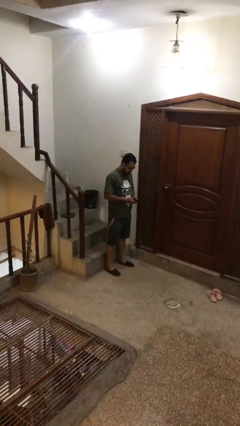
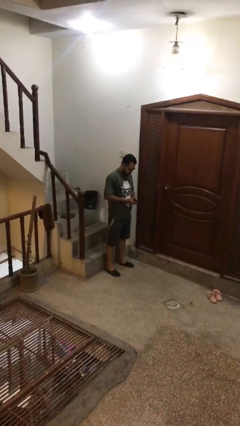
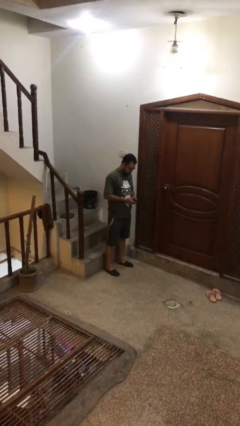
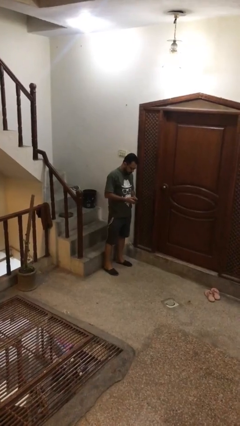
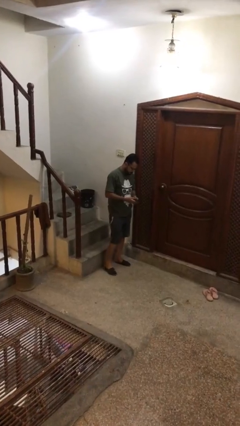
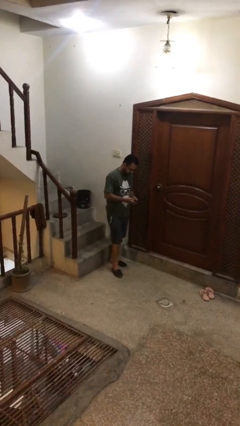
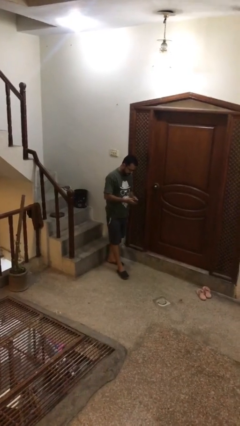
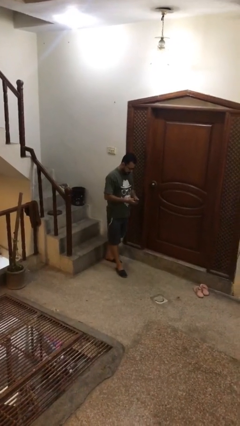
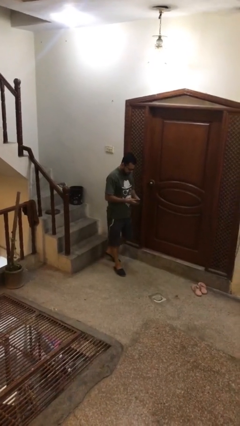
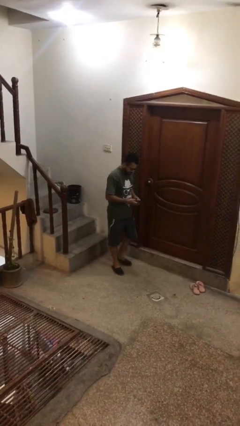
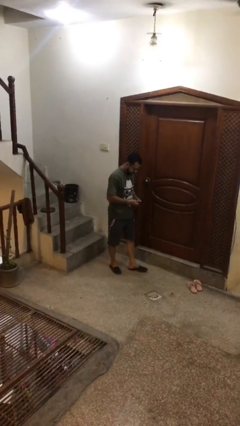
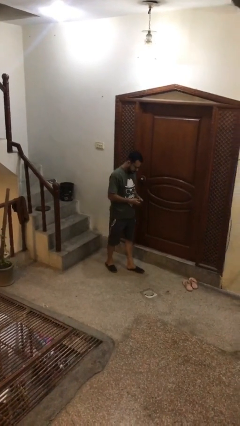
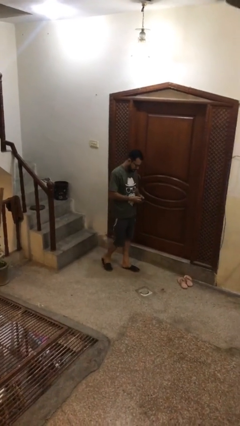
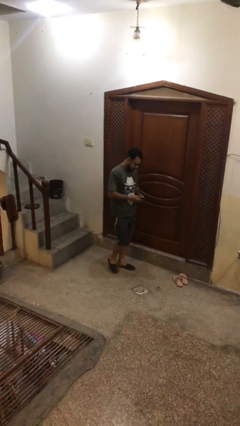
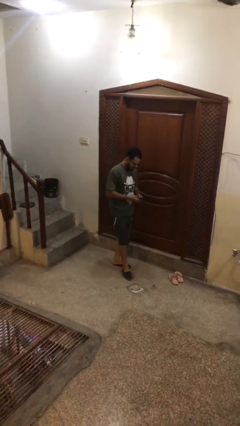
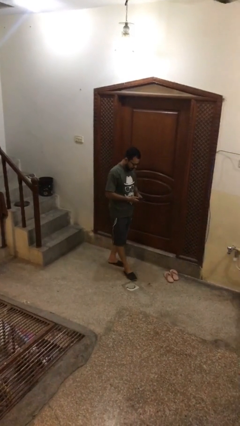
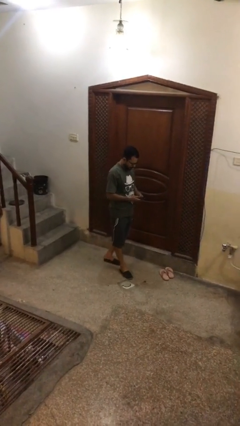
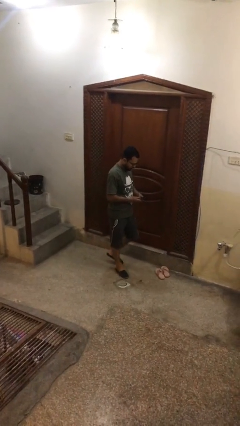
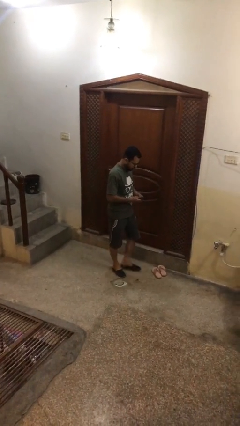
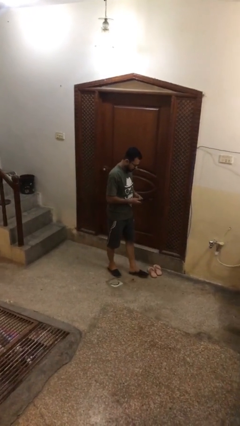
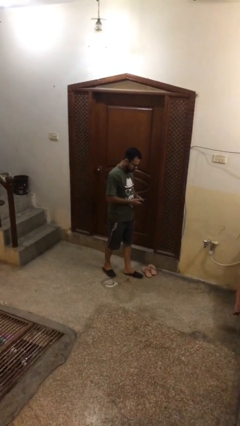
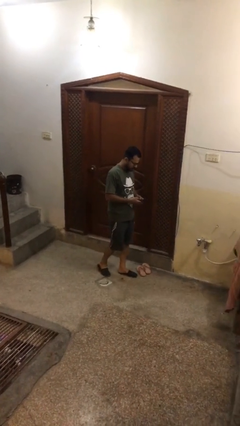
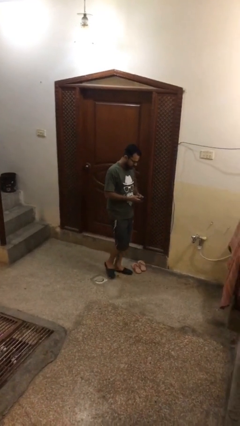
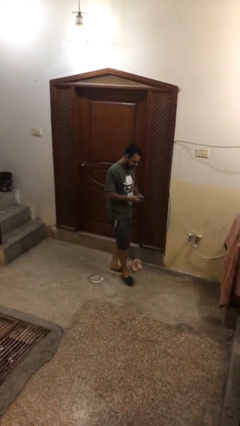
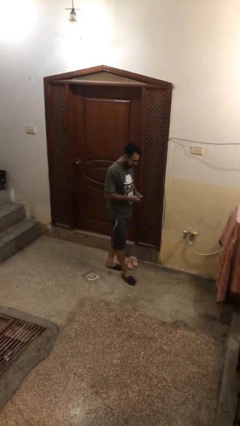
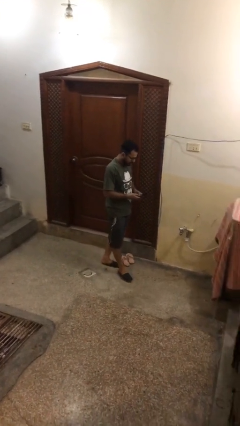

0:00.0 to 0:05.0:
person texts on phone

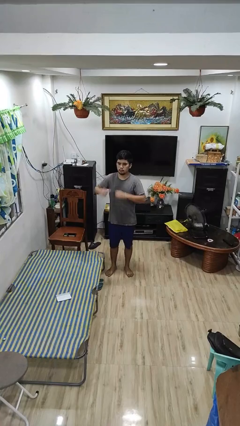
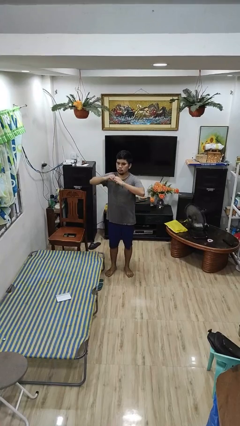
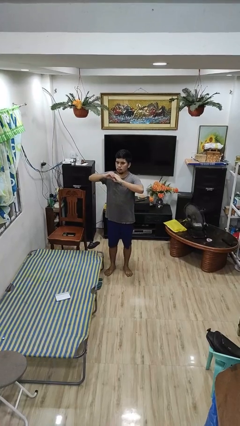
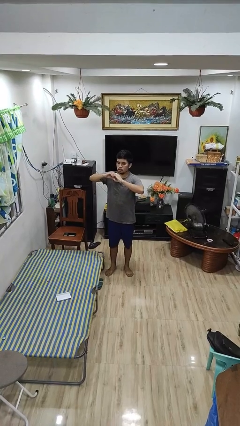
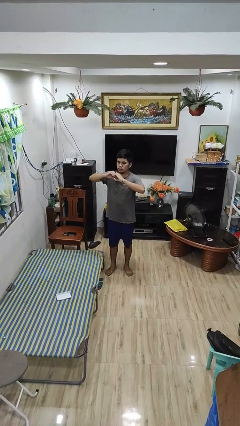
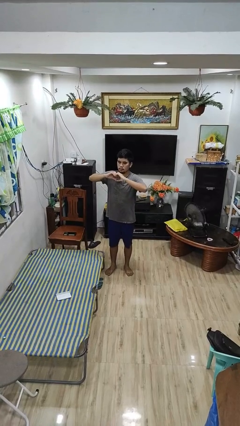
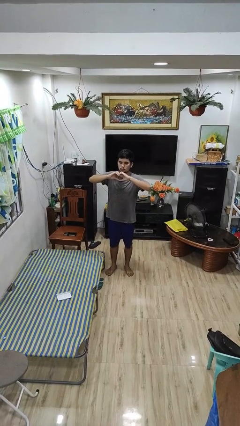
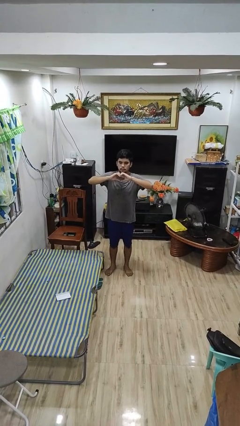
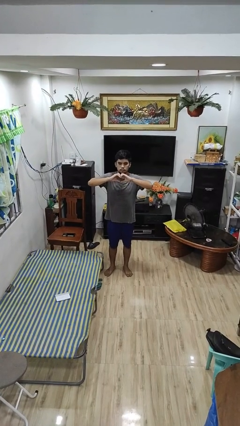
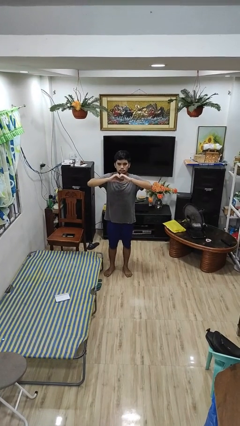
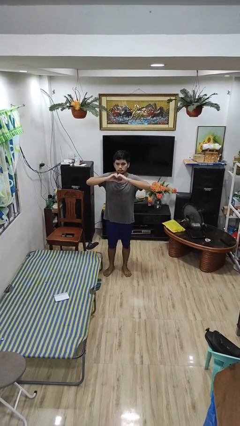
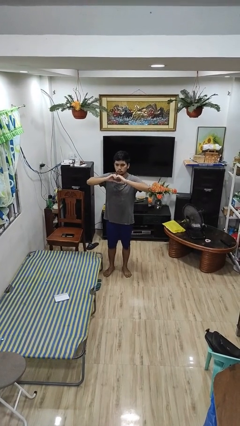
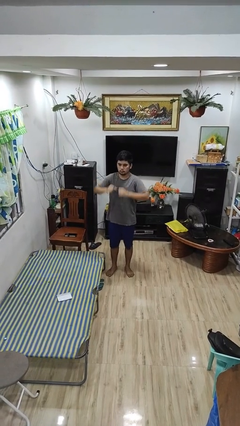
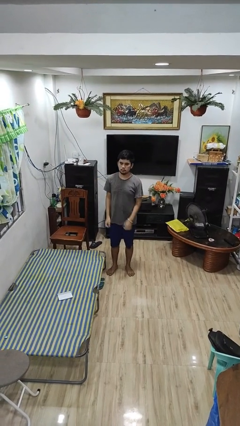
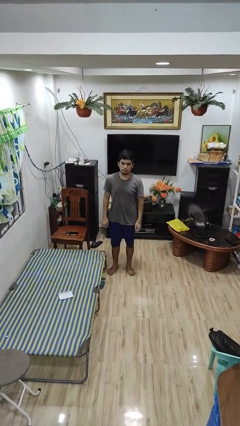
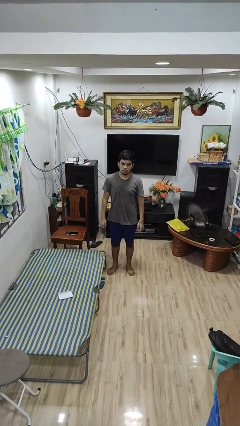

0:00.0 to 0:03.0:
person gestures heart

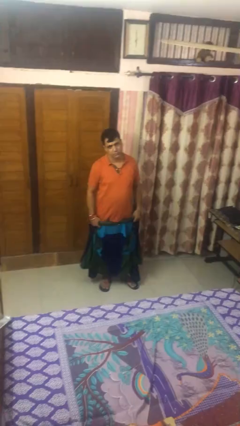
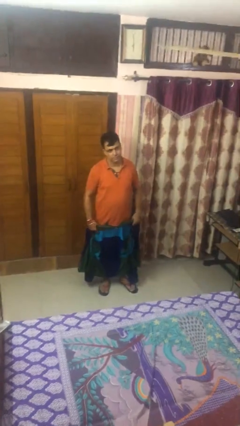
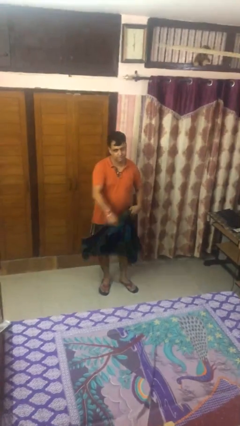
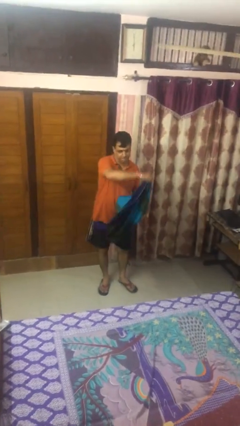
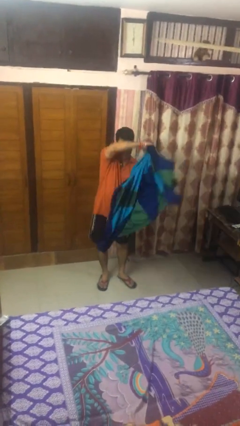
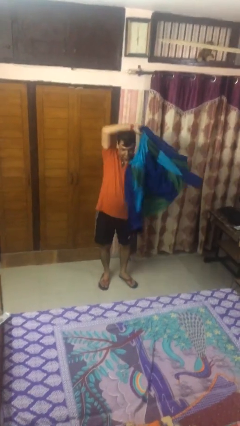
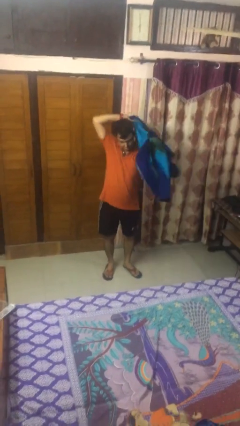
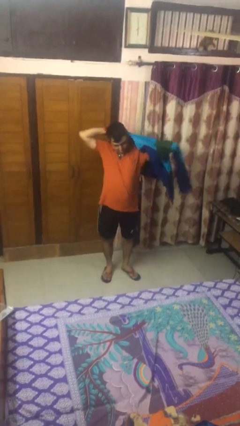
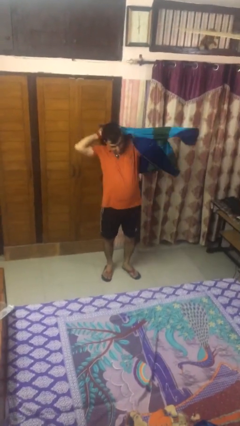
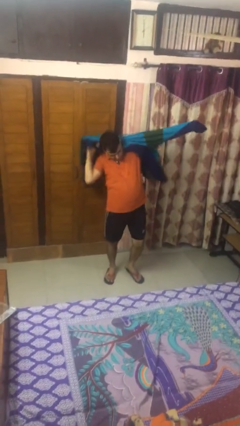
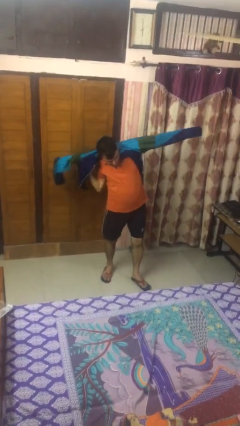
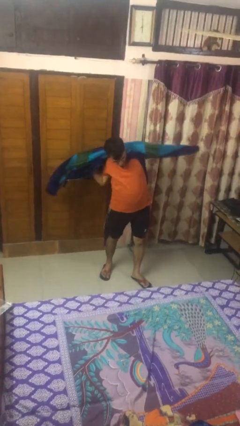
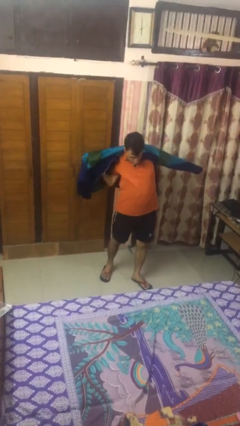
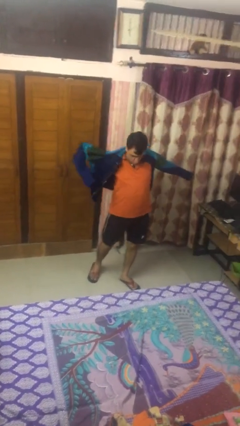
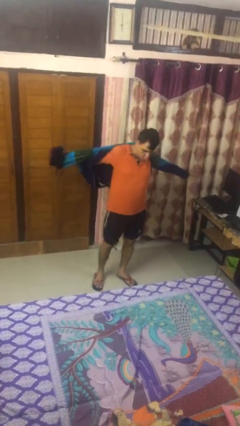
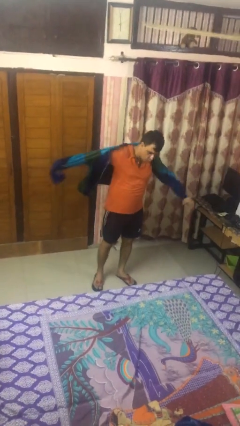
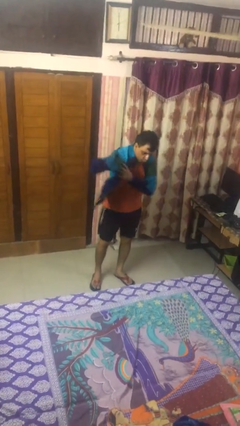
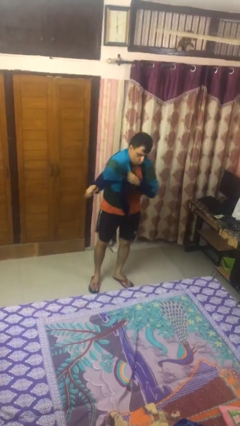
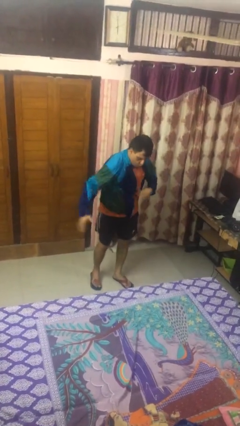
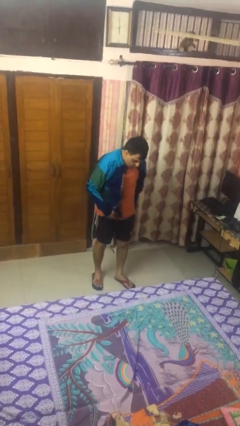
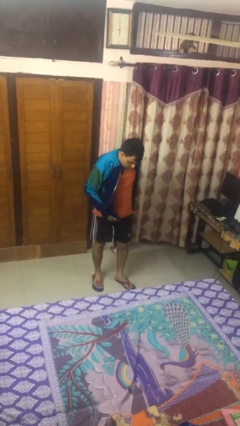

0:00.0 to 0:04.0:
person puts on jacket

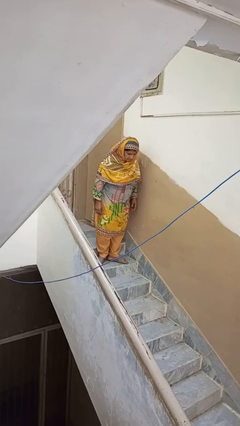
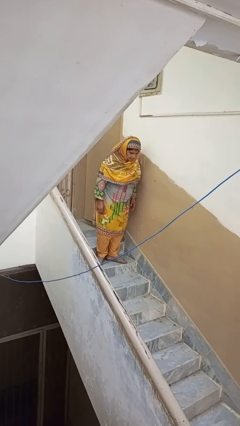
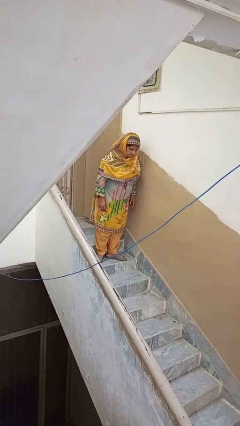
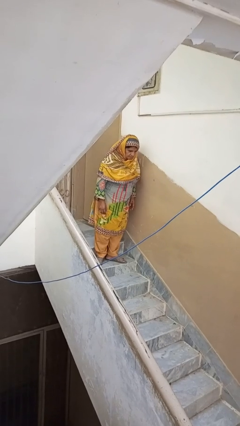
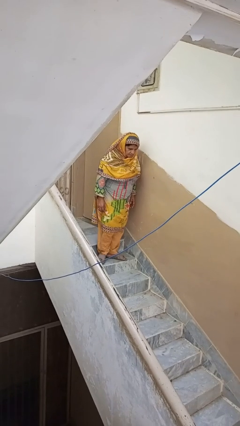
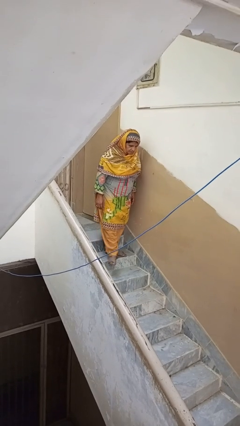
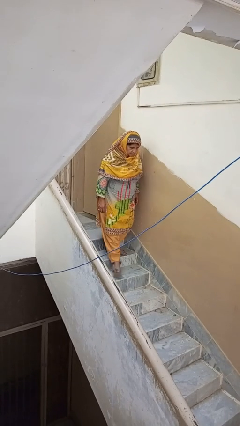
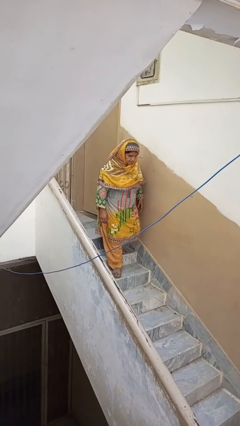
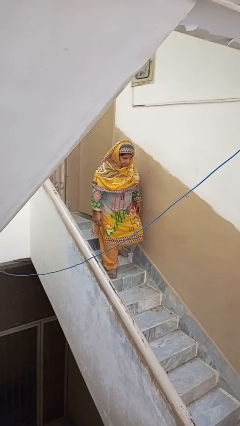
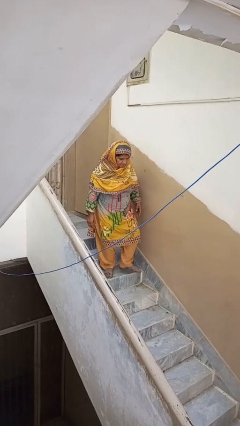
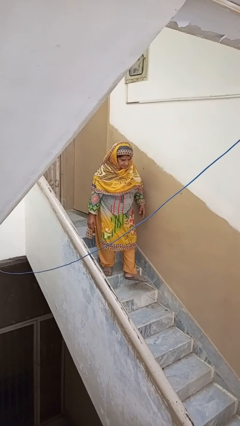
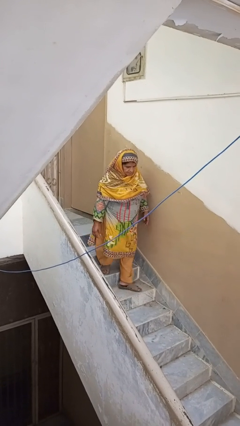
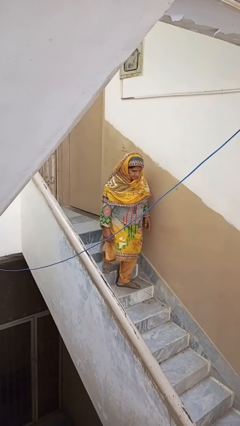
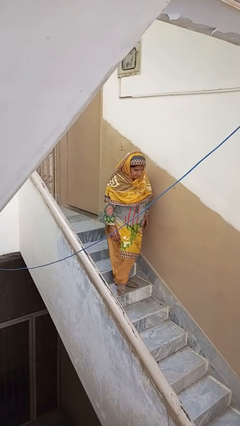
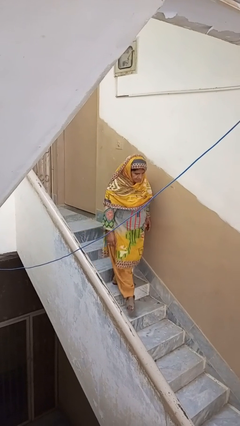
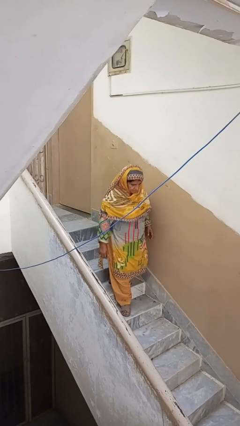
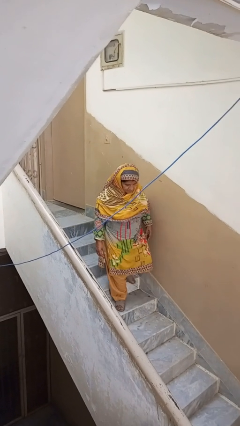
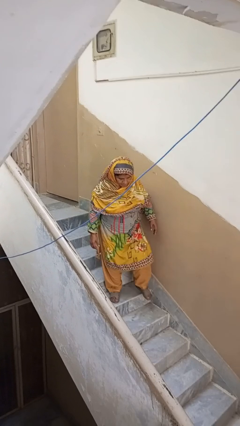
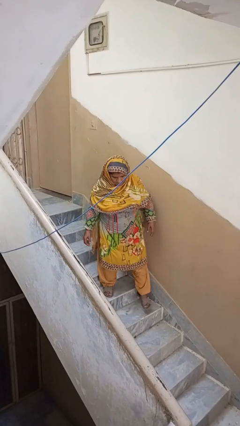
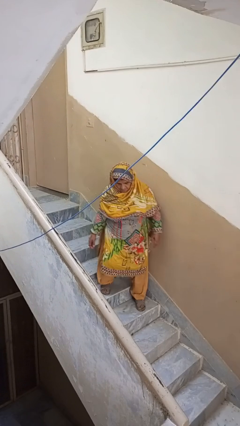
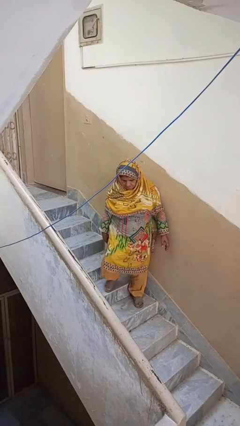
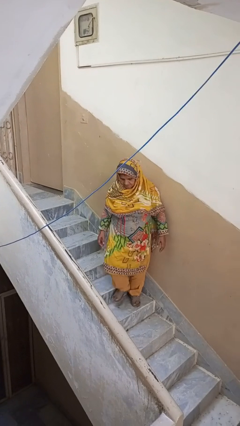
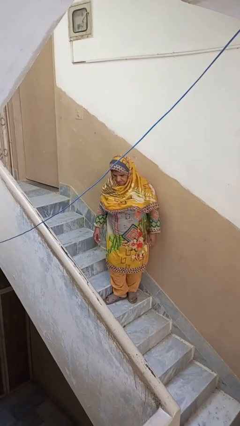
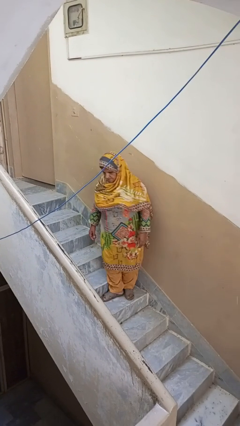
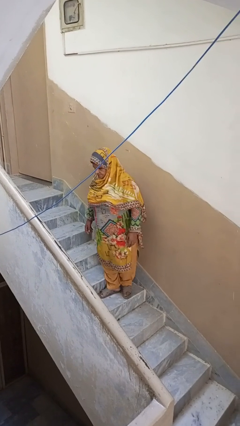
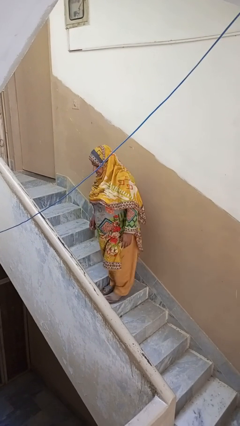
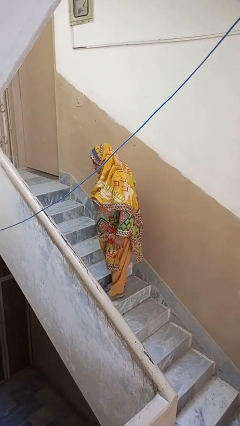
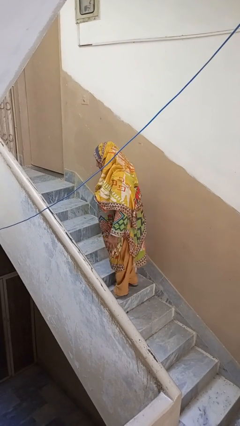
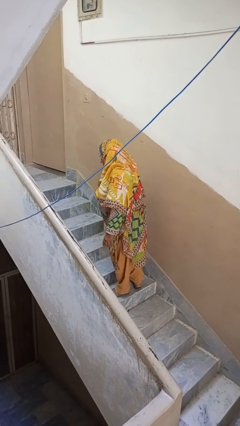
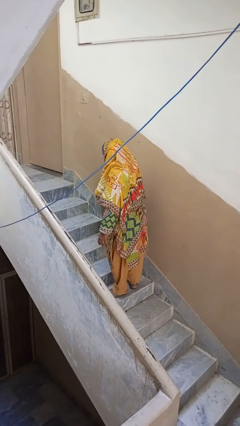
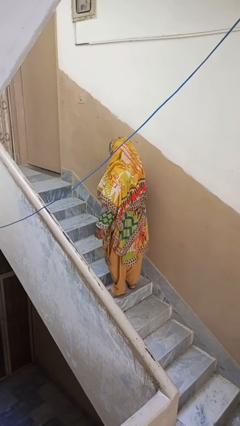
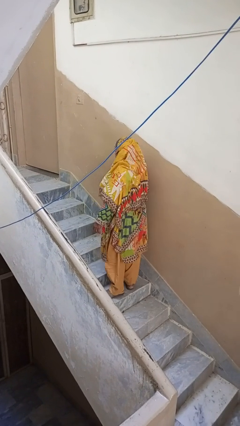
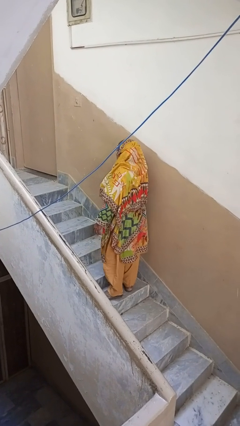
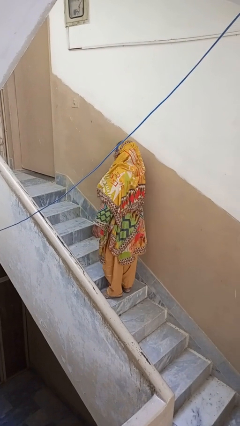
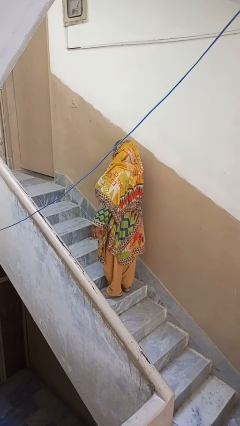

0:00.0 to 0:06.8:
person climbs down stairs
